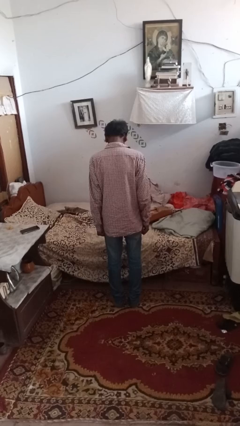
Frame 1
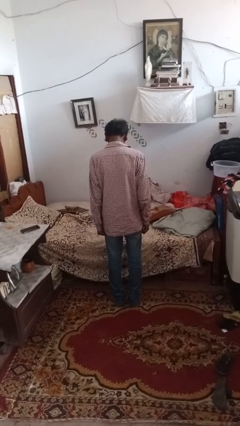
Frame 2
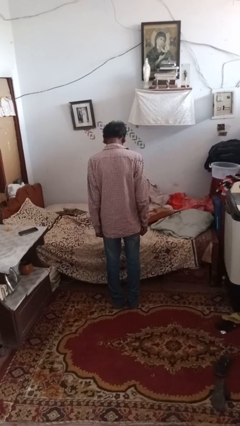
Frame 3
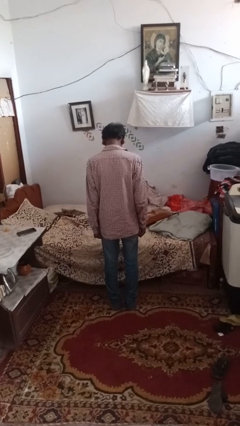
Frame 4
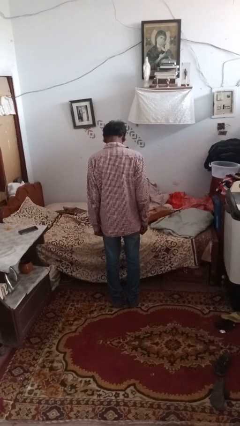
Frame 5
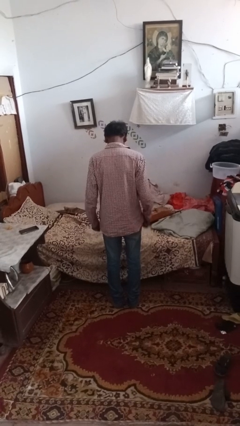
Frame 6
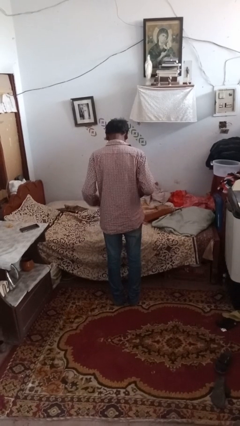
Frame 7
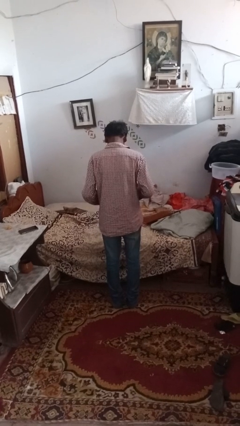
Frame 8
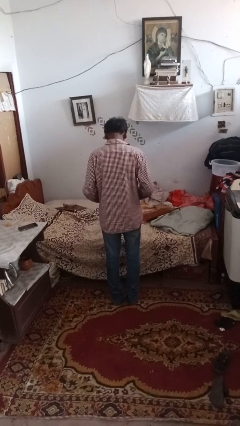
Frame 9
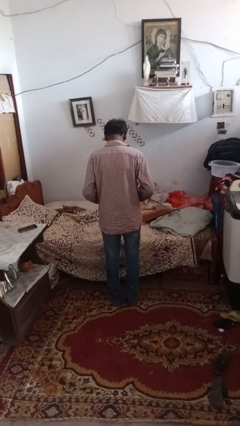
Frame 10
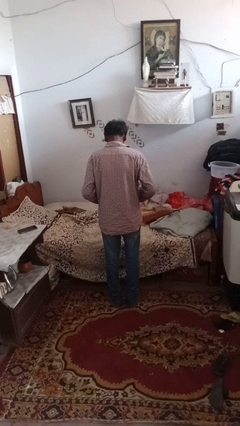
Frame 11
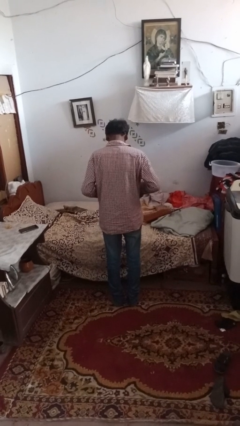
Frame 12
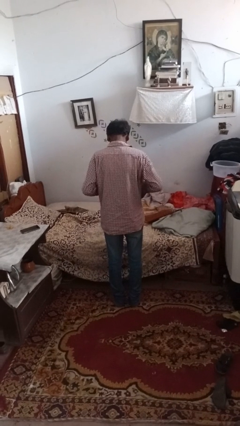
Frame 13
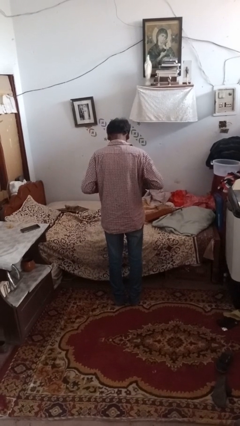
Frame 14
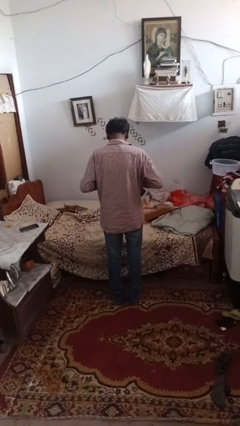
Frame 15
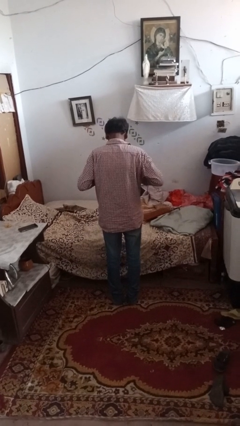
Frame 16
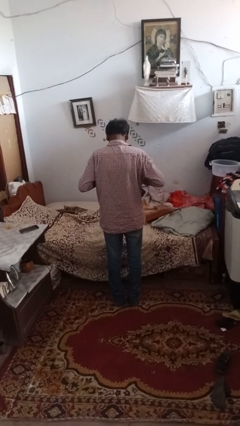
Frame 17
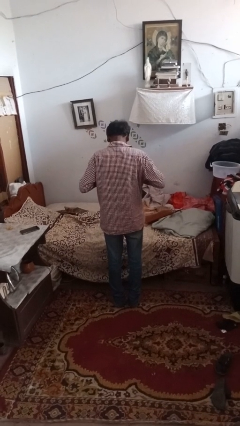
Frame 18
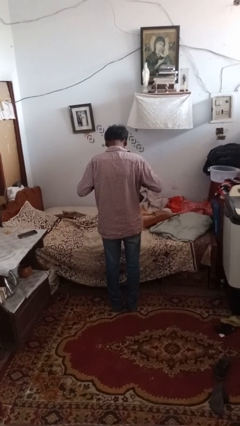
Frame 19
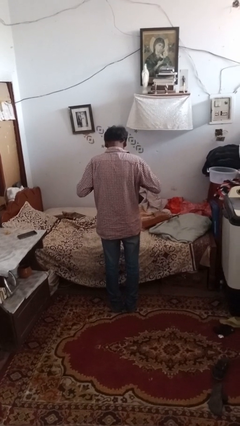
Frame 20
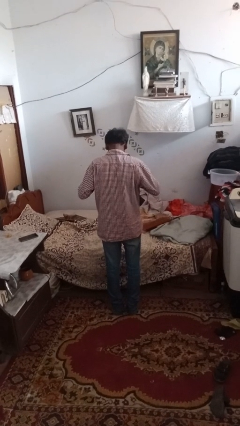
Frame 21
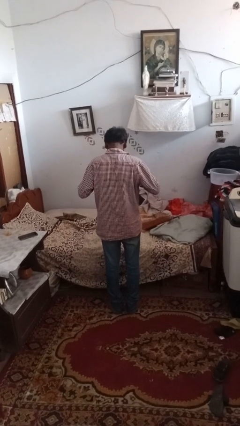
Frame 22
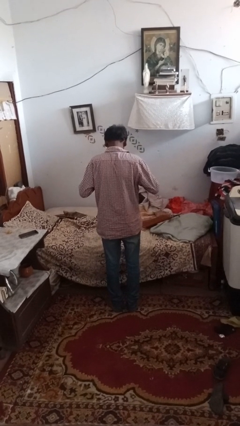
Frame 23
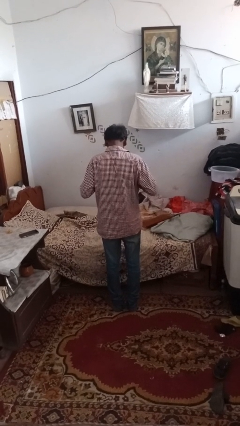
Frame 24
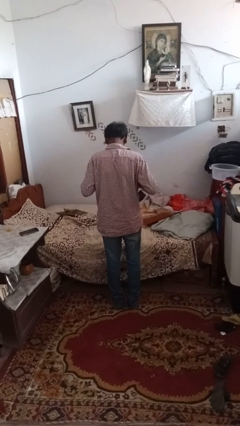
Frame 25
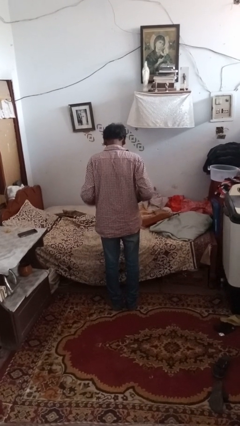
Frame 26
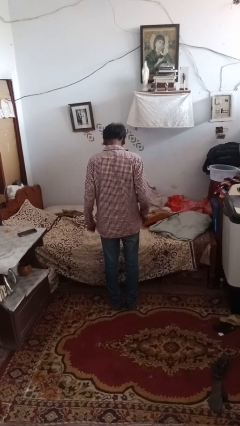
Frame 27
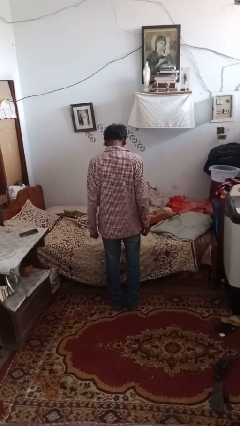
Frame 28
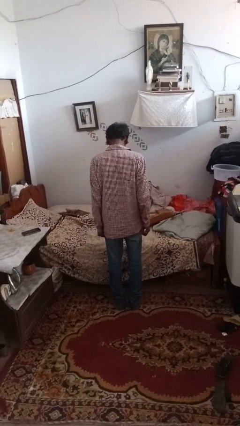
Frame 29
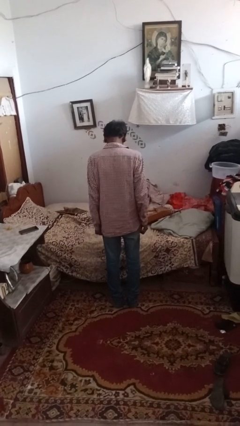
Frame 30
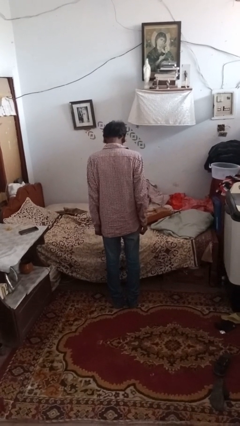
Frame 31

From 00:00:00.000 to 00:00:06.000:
person buttons shirt

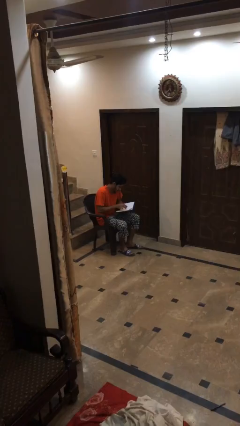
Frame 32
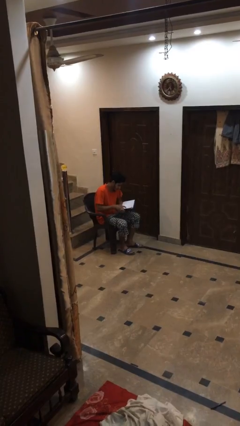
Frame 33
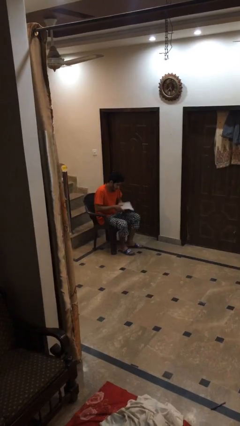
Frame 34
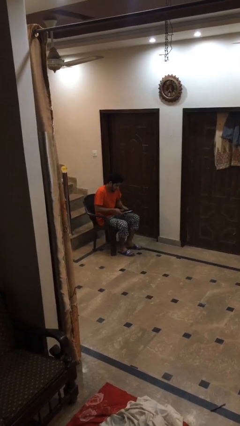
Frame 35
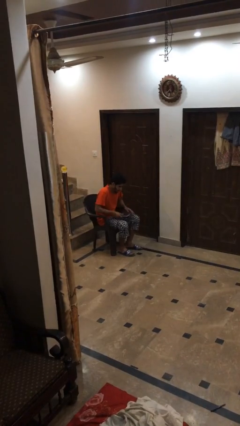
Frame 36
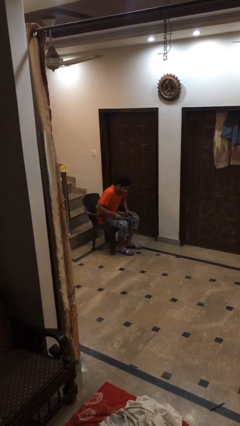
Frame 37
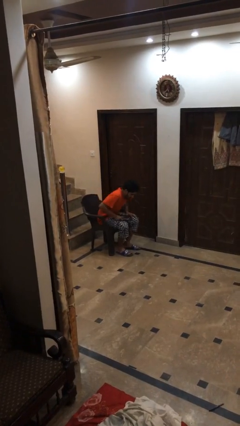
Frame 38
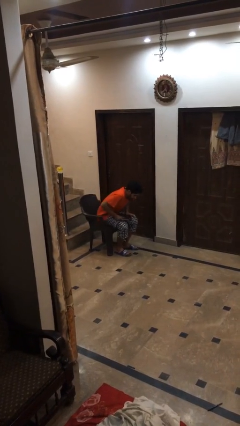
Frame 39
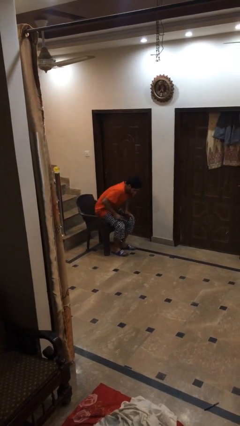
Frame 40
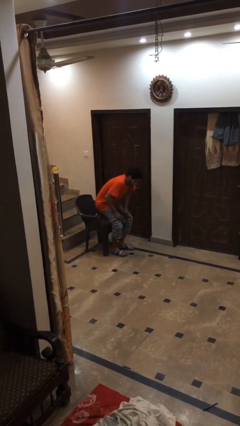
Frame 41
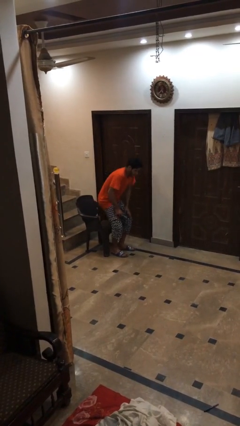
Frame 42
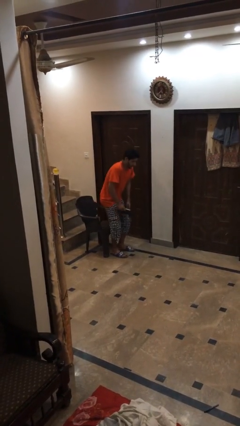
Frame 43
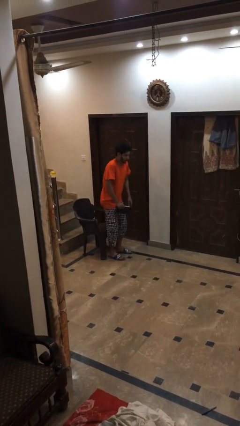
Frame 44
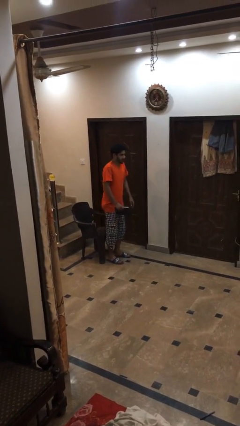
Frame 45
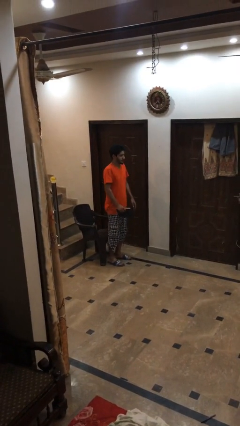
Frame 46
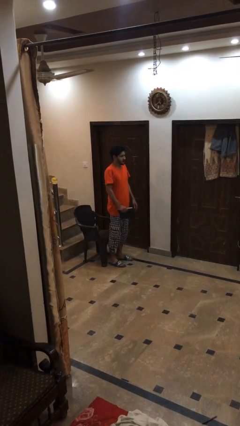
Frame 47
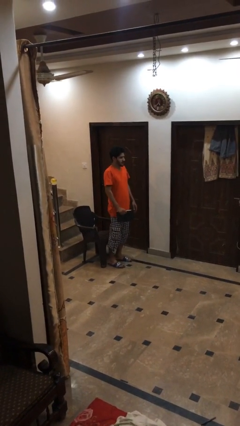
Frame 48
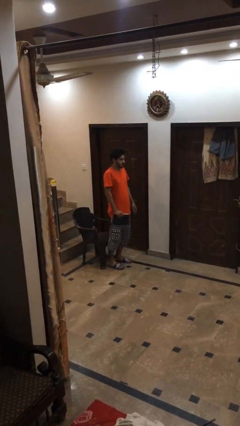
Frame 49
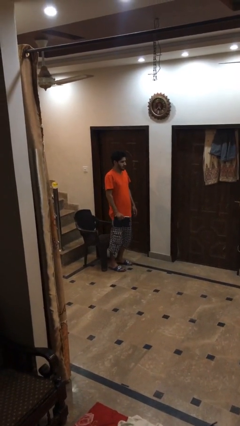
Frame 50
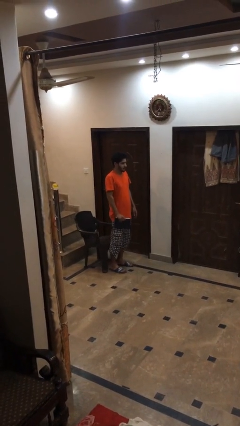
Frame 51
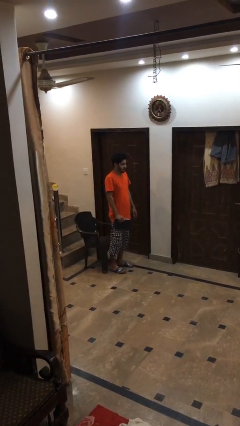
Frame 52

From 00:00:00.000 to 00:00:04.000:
person stands up

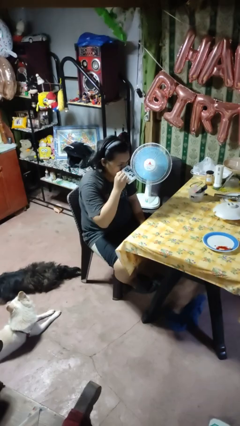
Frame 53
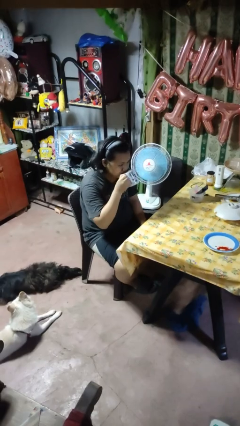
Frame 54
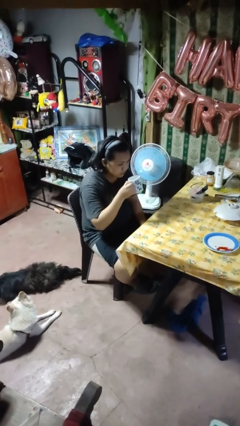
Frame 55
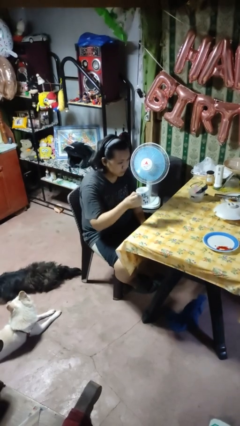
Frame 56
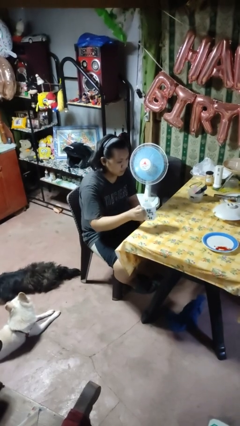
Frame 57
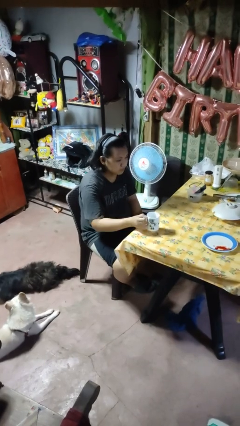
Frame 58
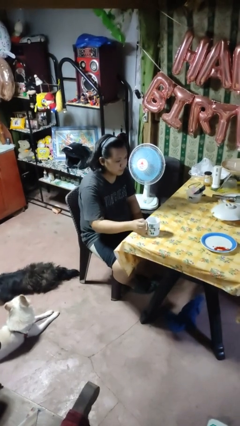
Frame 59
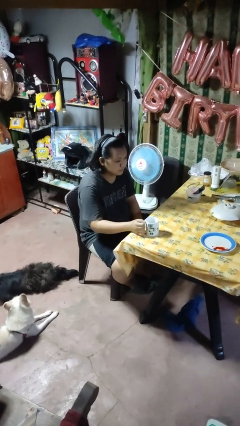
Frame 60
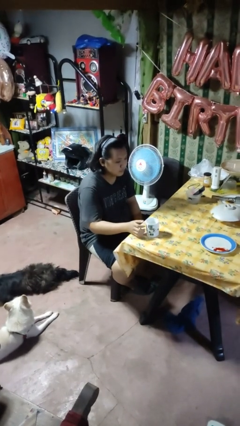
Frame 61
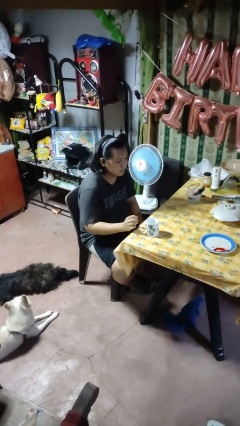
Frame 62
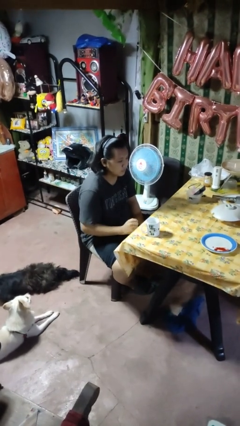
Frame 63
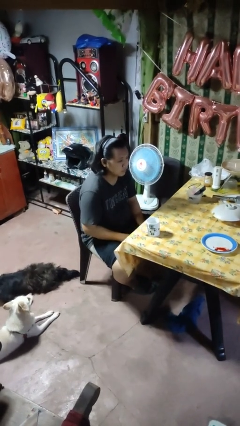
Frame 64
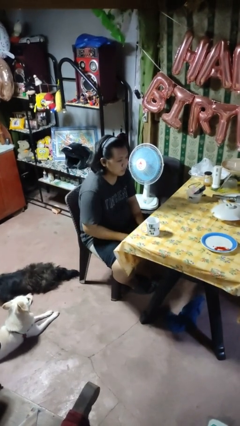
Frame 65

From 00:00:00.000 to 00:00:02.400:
person puts down object on table

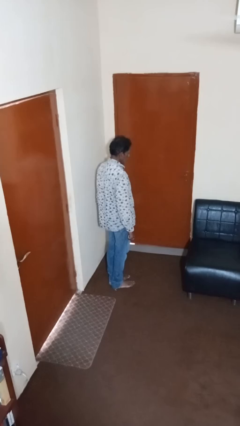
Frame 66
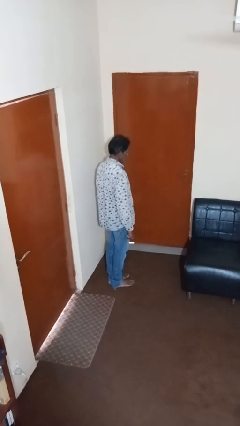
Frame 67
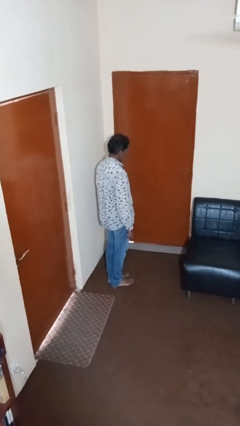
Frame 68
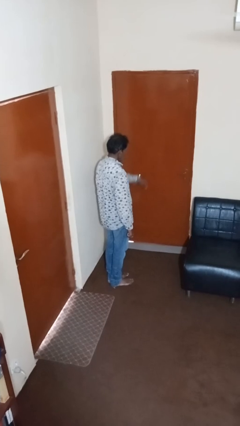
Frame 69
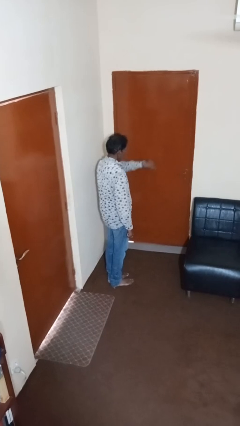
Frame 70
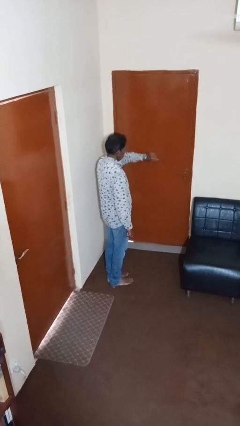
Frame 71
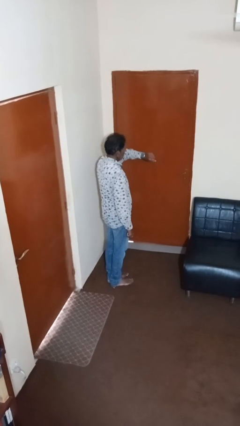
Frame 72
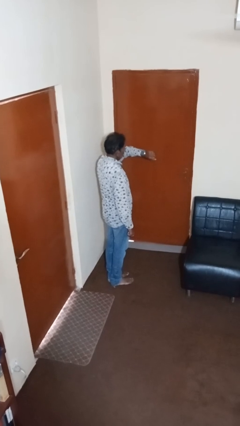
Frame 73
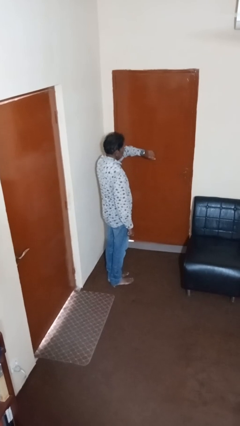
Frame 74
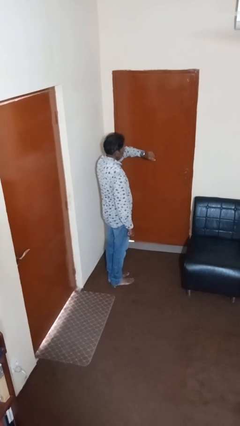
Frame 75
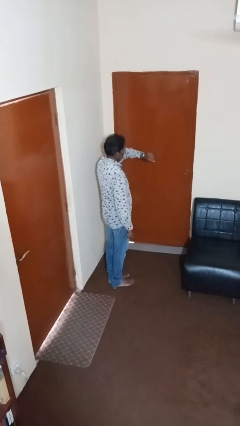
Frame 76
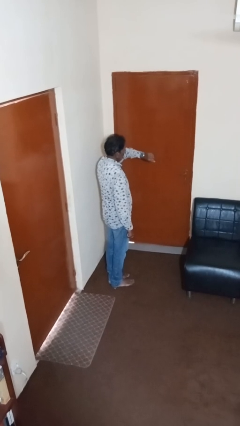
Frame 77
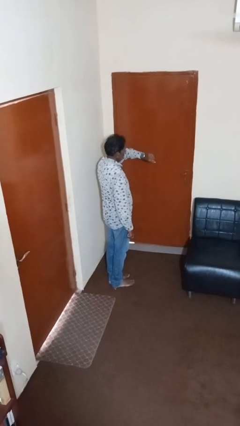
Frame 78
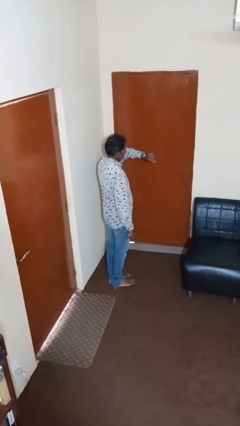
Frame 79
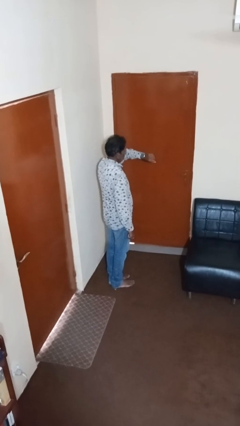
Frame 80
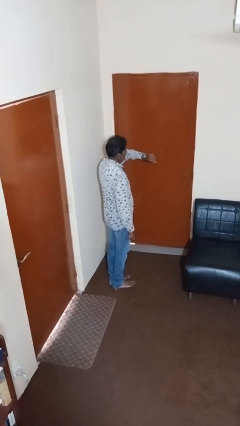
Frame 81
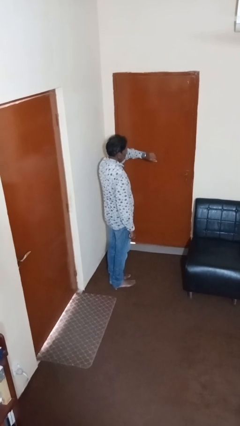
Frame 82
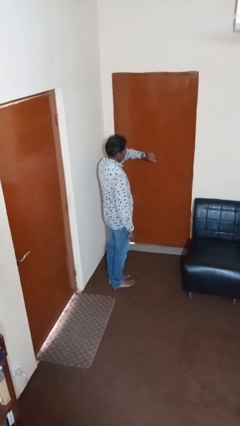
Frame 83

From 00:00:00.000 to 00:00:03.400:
person looks at wristwatch

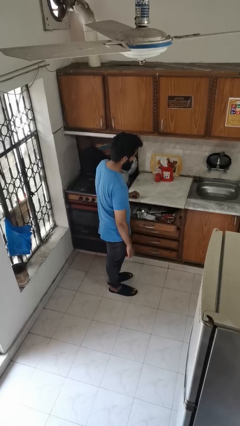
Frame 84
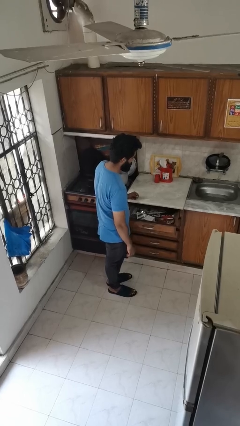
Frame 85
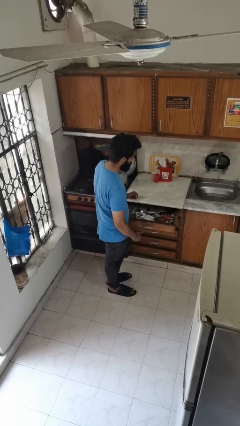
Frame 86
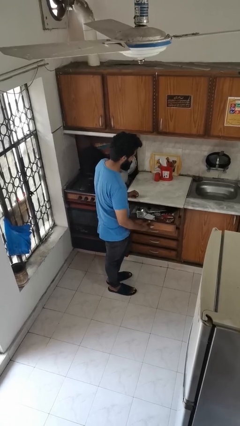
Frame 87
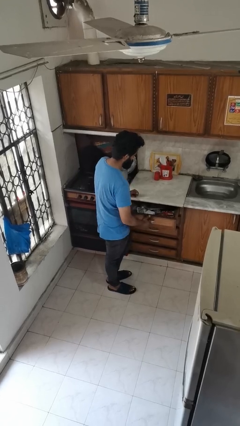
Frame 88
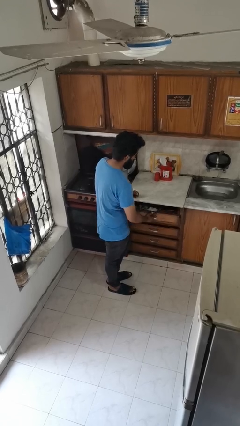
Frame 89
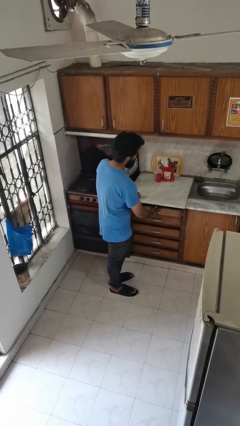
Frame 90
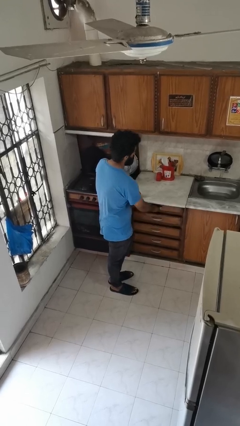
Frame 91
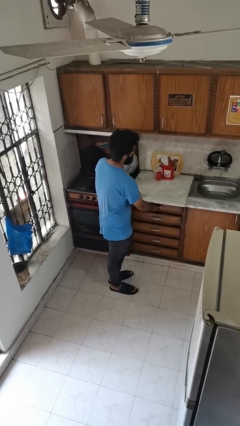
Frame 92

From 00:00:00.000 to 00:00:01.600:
person closes kitchen drawer
